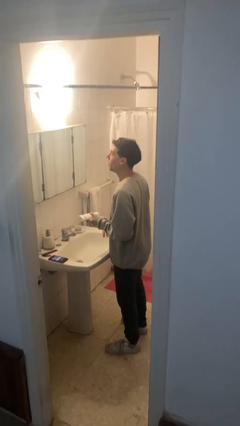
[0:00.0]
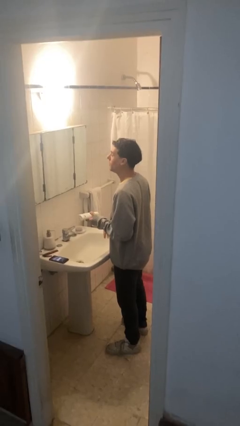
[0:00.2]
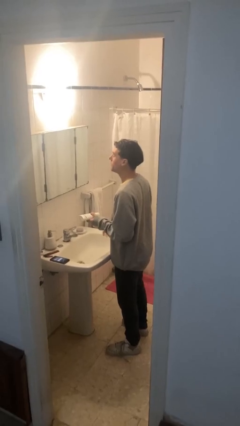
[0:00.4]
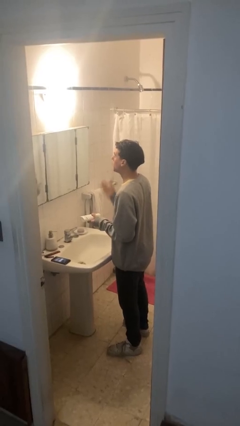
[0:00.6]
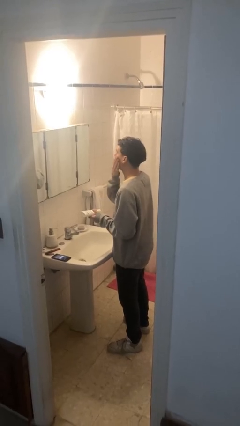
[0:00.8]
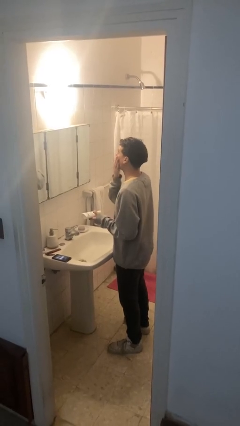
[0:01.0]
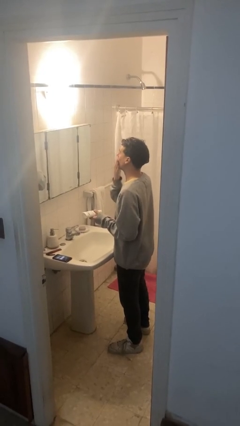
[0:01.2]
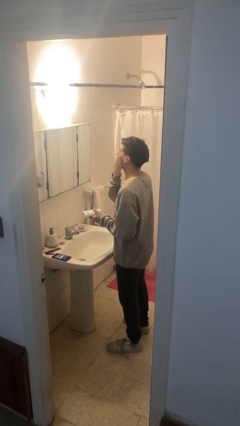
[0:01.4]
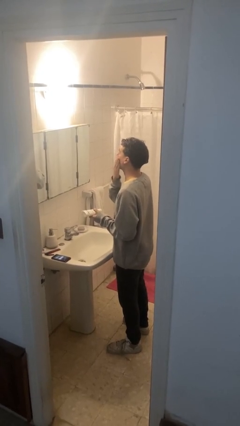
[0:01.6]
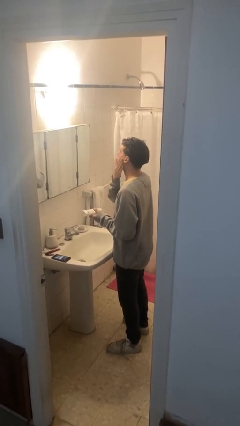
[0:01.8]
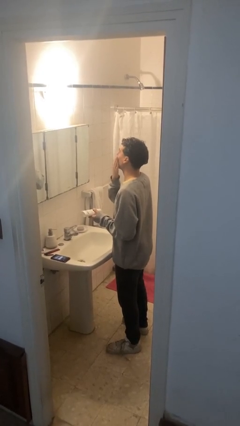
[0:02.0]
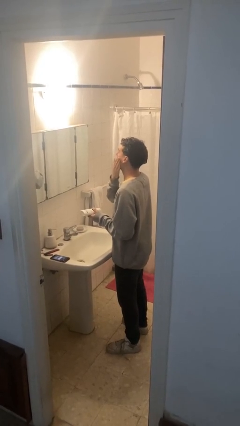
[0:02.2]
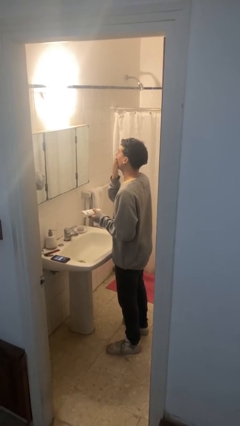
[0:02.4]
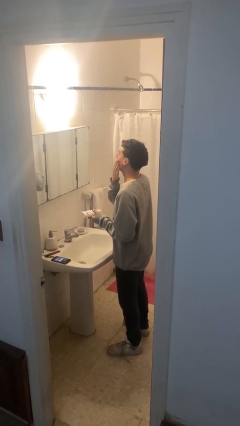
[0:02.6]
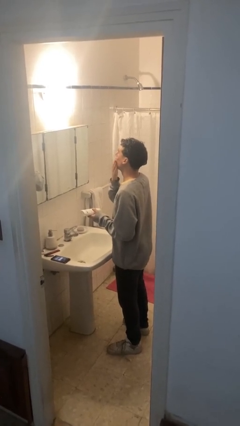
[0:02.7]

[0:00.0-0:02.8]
person applies foundation makeup

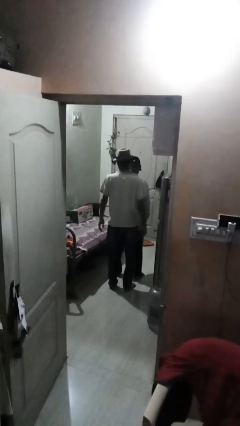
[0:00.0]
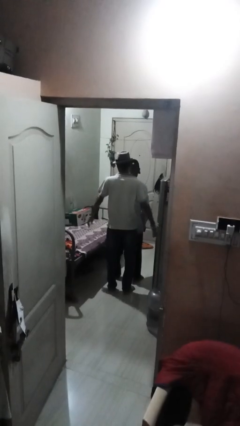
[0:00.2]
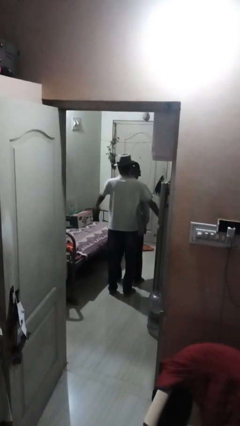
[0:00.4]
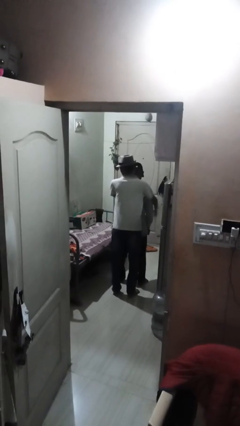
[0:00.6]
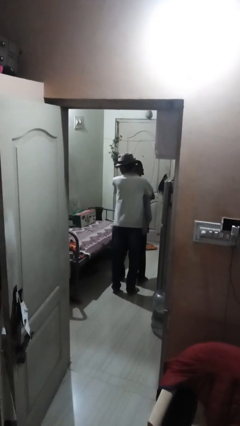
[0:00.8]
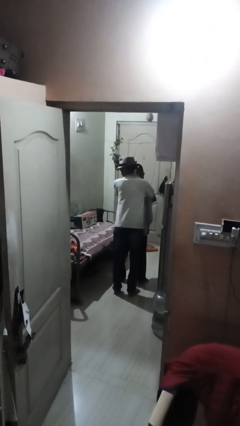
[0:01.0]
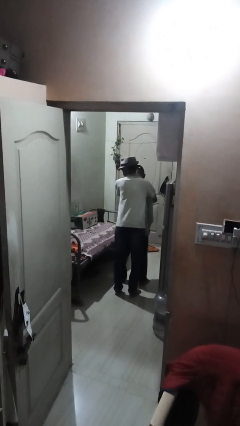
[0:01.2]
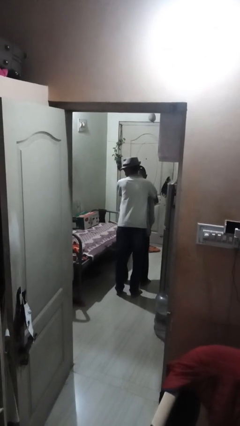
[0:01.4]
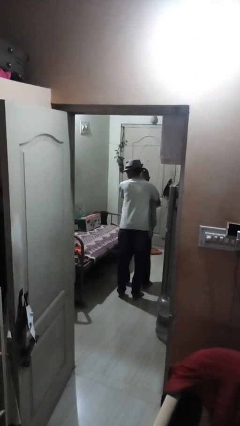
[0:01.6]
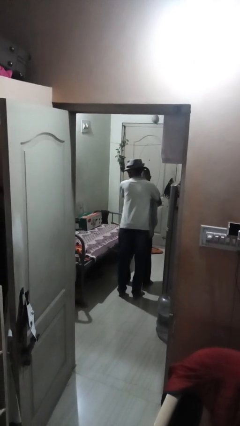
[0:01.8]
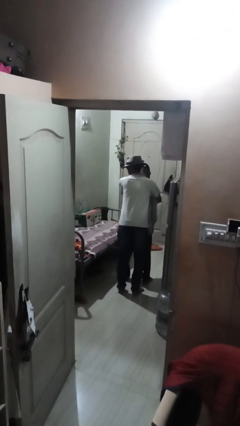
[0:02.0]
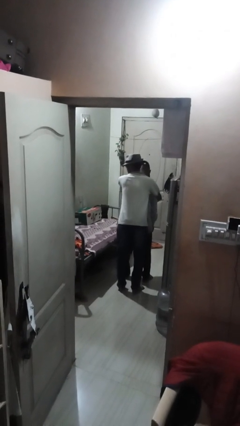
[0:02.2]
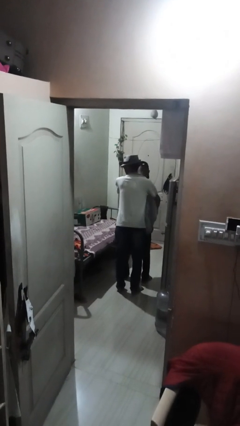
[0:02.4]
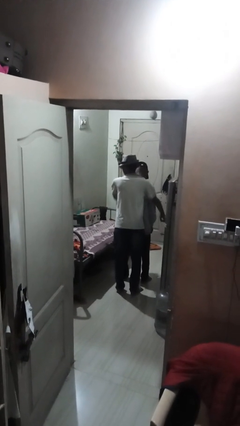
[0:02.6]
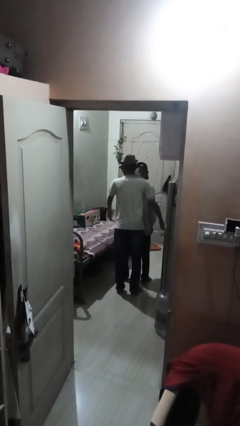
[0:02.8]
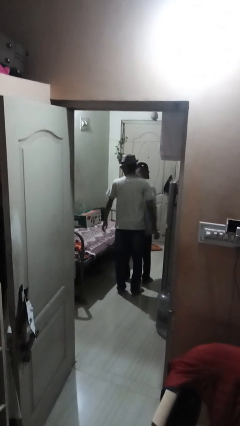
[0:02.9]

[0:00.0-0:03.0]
person hugs person from behind

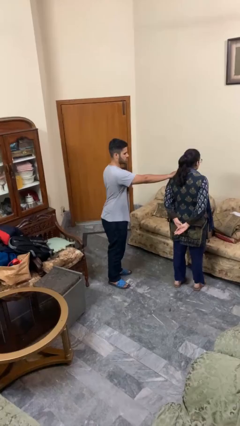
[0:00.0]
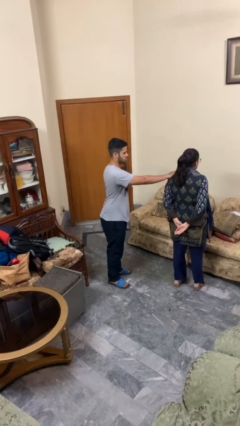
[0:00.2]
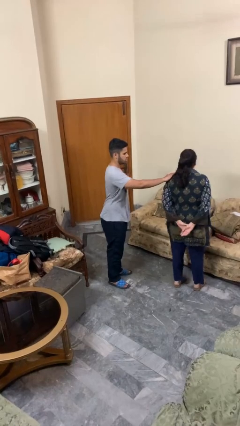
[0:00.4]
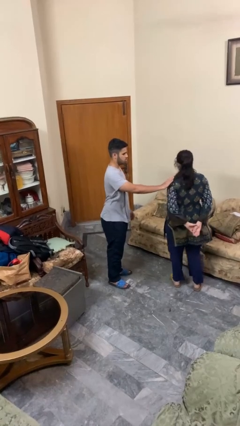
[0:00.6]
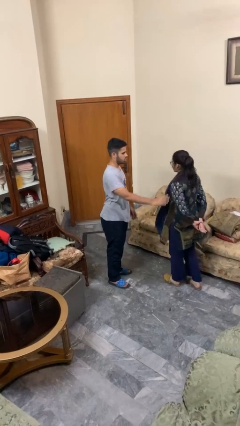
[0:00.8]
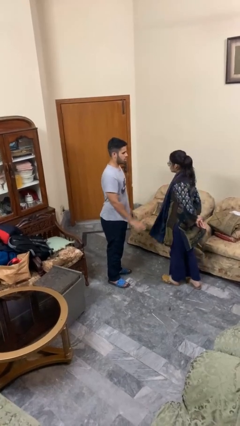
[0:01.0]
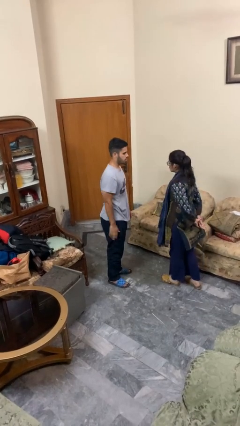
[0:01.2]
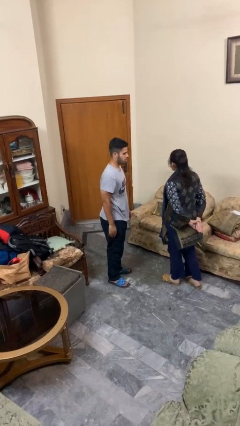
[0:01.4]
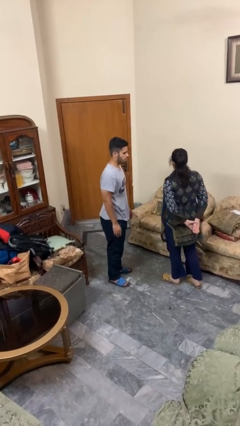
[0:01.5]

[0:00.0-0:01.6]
person spins person around

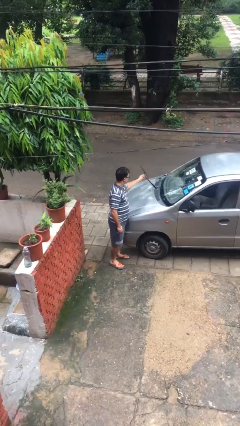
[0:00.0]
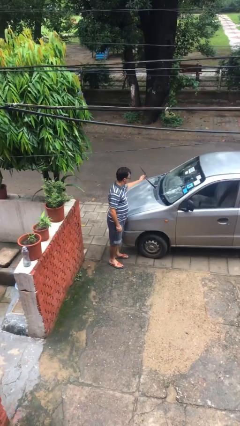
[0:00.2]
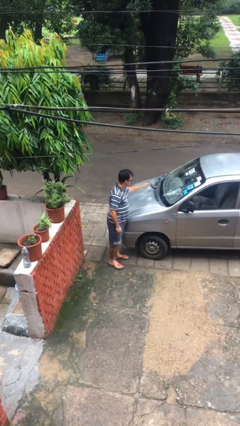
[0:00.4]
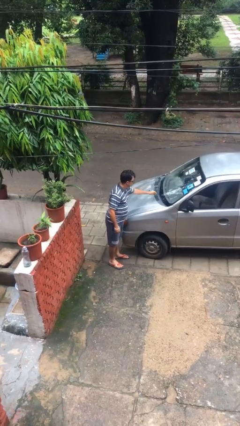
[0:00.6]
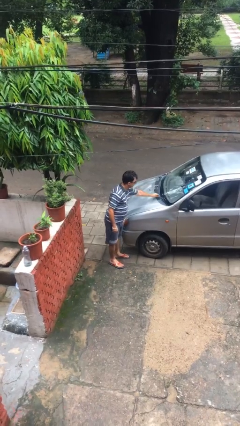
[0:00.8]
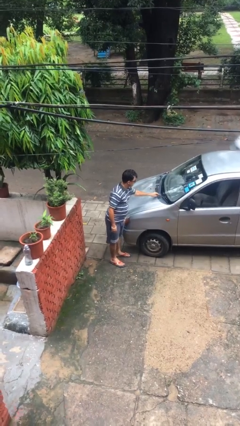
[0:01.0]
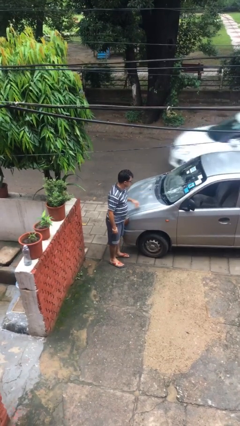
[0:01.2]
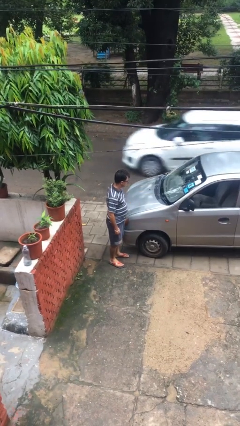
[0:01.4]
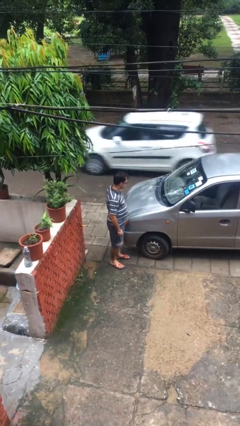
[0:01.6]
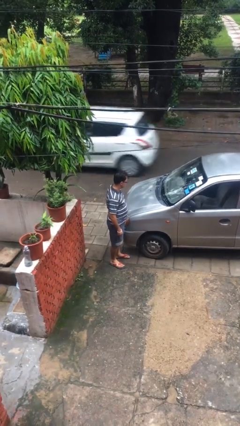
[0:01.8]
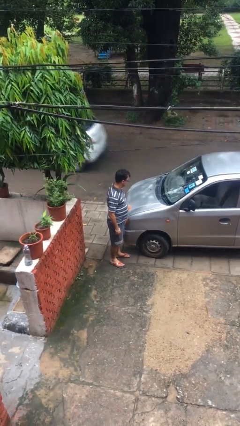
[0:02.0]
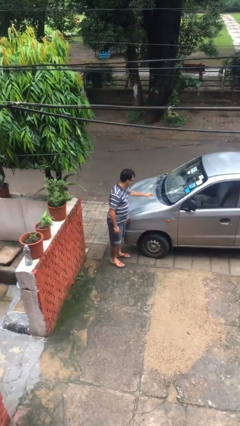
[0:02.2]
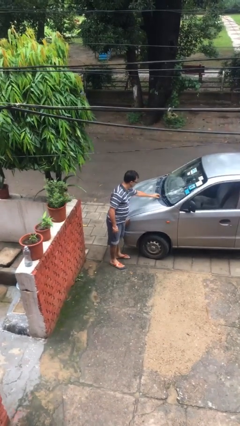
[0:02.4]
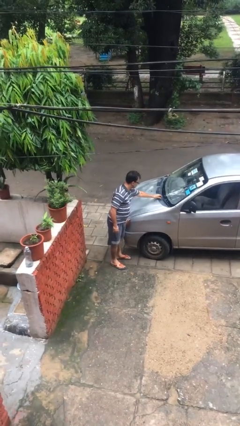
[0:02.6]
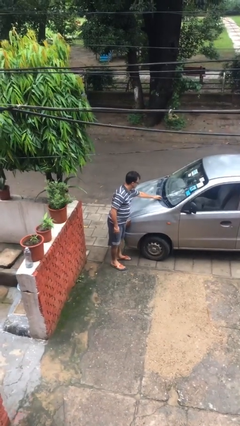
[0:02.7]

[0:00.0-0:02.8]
person flips down car wipers

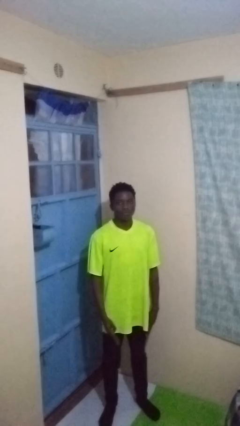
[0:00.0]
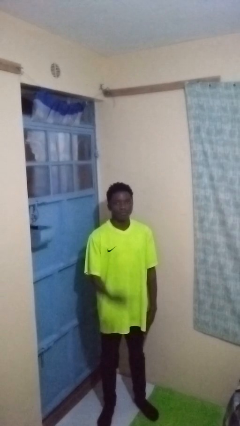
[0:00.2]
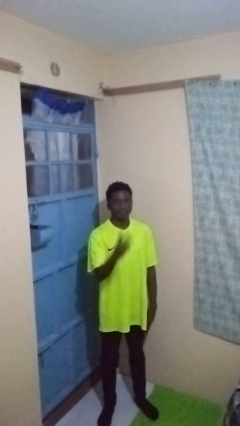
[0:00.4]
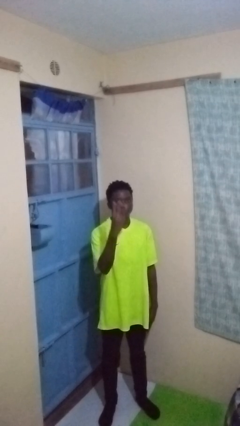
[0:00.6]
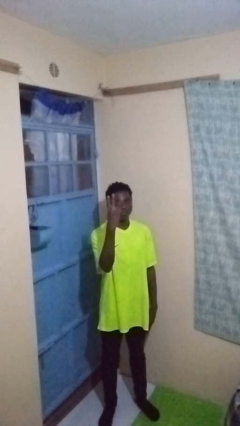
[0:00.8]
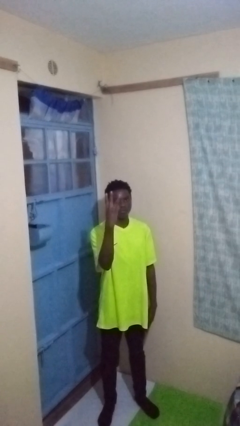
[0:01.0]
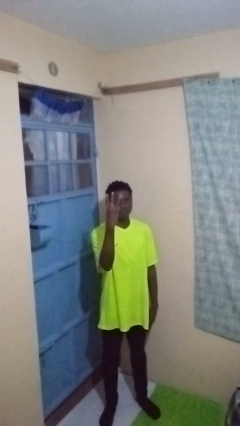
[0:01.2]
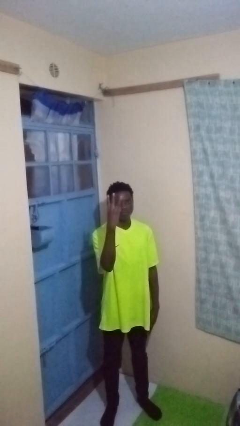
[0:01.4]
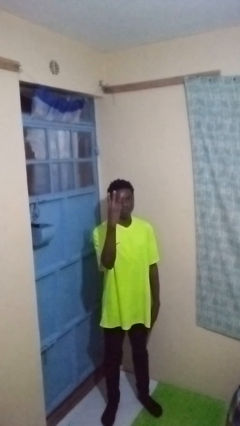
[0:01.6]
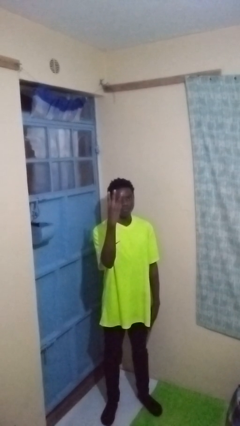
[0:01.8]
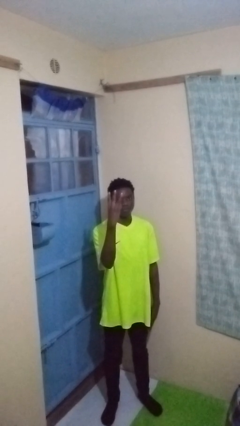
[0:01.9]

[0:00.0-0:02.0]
person gestures number three

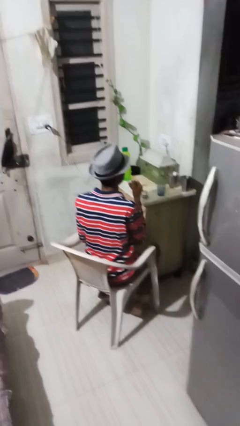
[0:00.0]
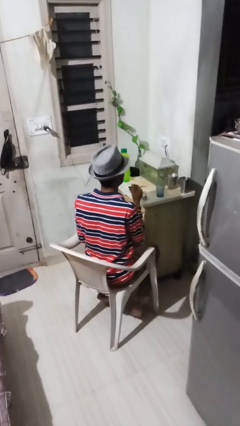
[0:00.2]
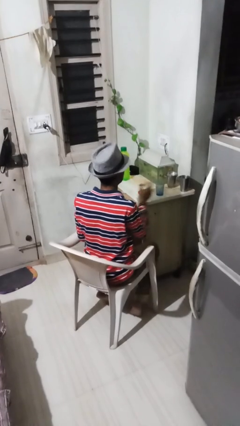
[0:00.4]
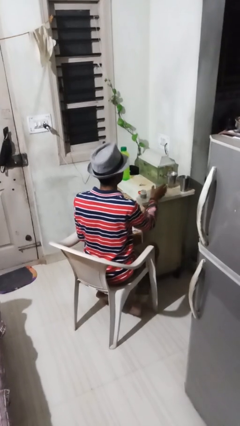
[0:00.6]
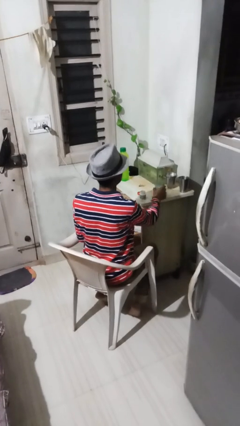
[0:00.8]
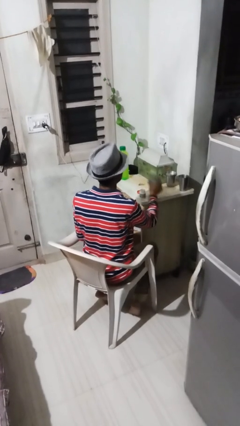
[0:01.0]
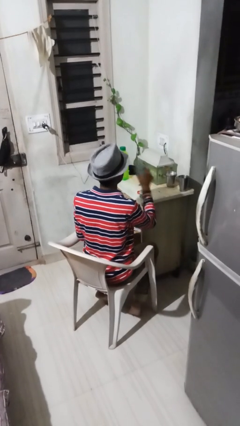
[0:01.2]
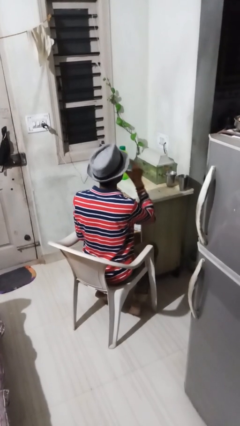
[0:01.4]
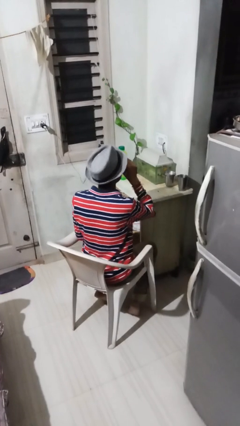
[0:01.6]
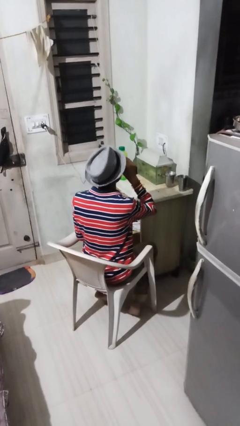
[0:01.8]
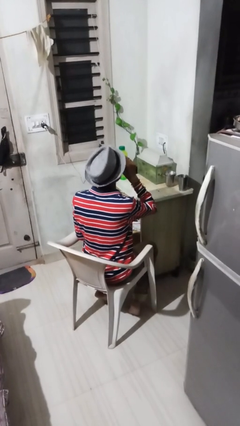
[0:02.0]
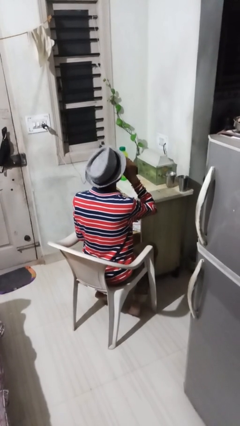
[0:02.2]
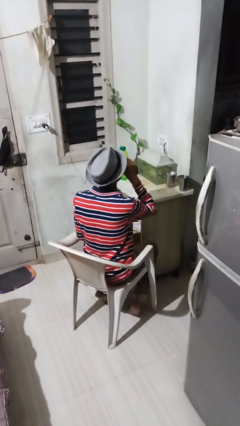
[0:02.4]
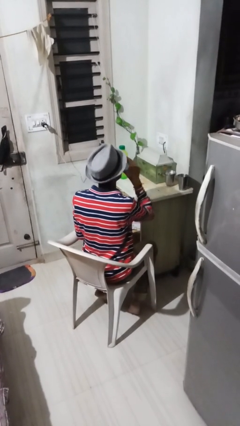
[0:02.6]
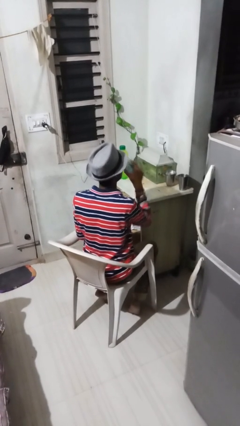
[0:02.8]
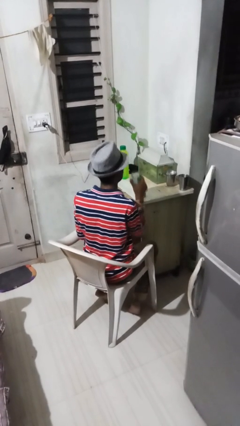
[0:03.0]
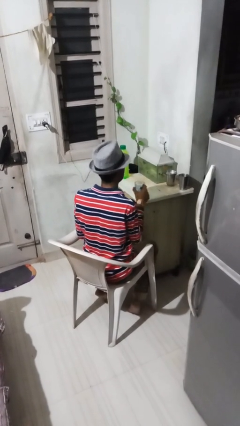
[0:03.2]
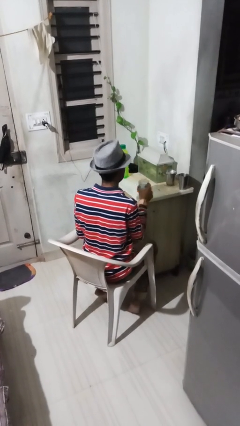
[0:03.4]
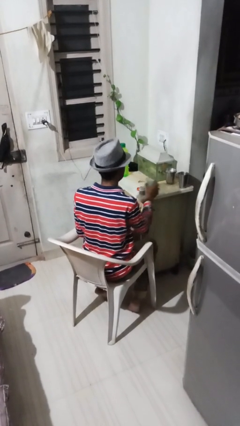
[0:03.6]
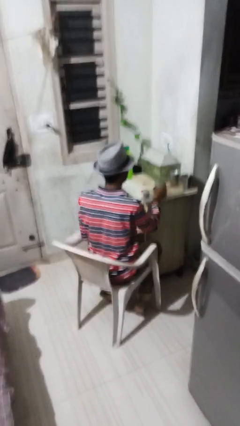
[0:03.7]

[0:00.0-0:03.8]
person drinks from cup

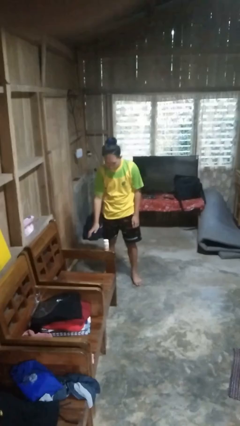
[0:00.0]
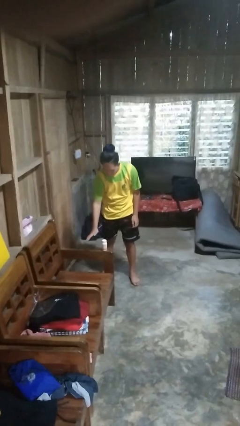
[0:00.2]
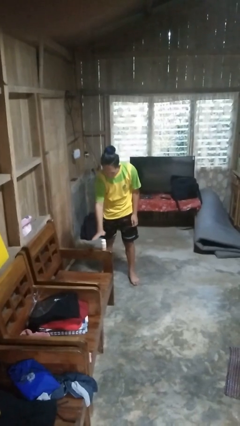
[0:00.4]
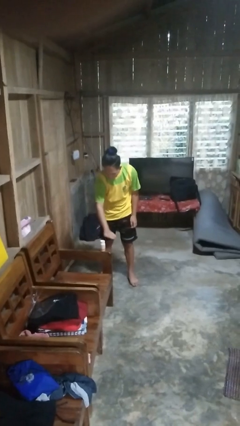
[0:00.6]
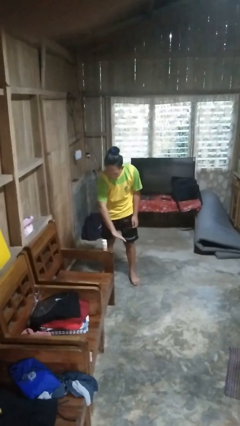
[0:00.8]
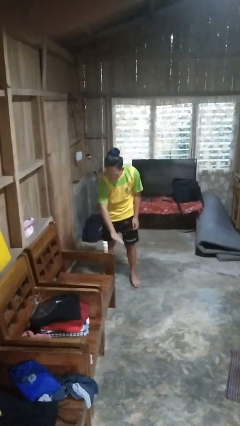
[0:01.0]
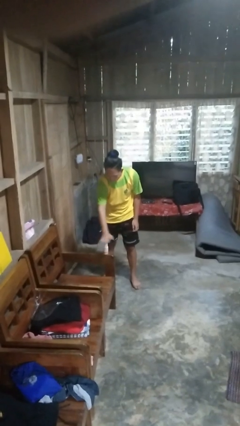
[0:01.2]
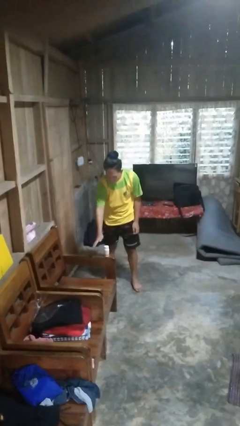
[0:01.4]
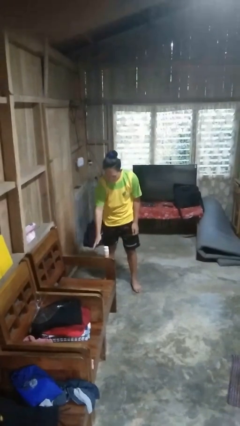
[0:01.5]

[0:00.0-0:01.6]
person waves hand over object
